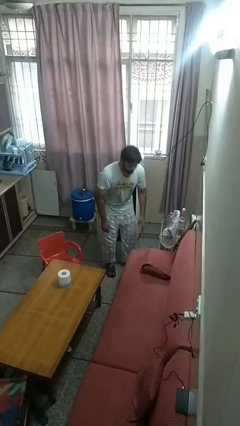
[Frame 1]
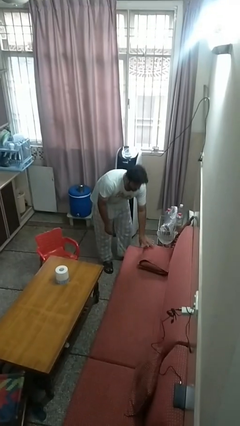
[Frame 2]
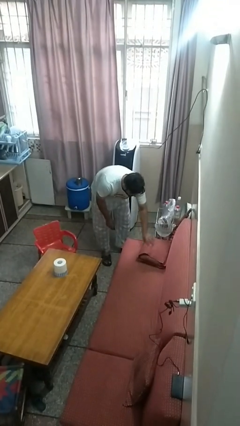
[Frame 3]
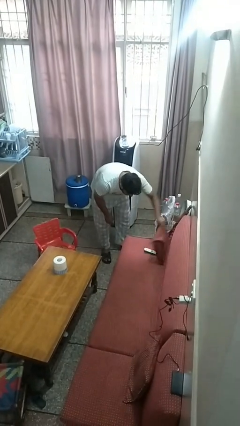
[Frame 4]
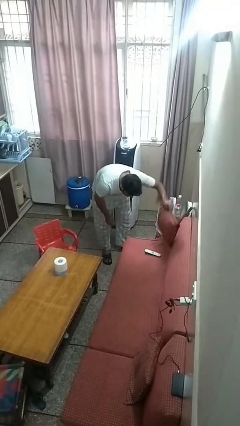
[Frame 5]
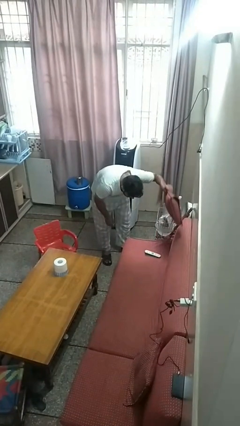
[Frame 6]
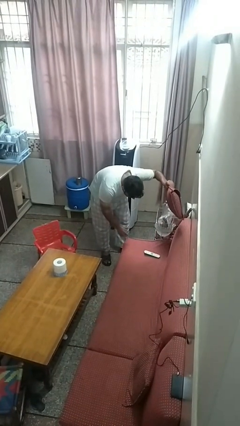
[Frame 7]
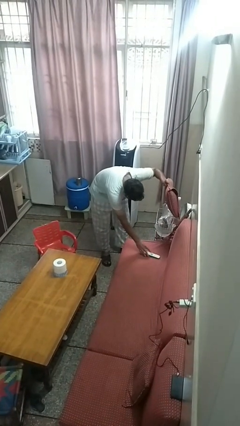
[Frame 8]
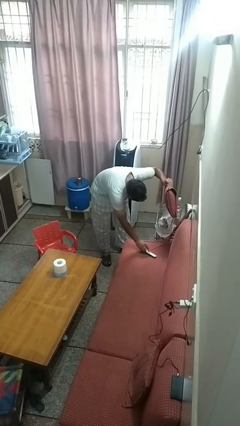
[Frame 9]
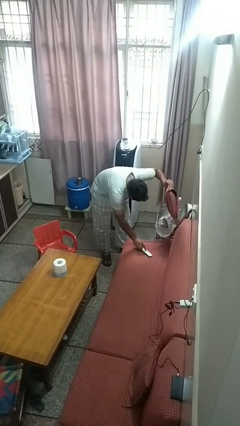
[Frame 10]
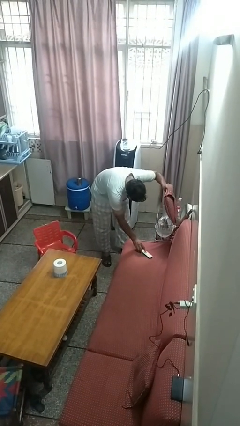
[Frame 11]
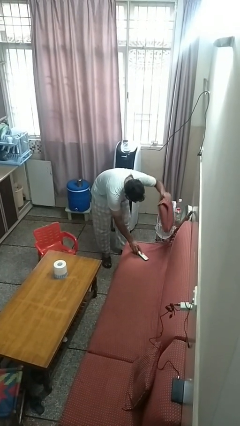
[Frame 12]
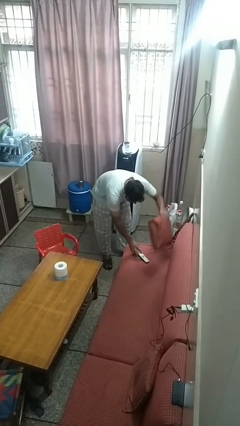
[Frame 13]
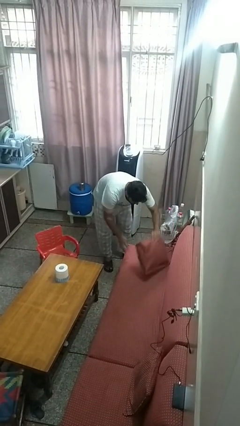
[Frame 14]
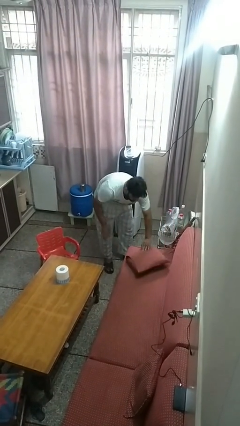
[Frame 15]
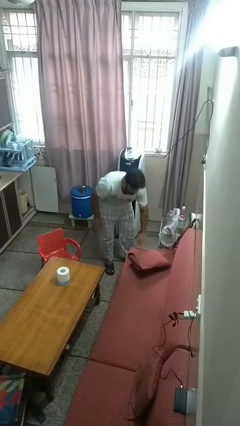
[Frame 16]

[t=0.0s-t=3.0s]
person searches in couch

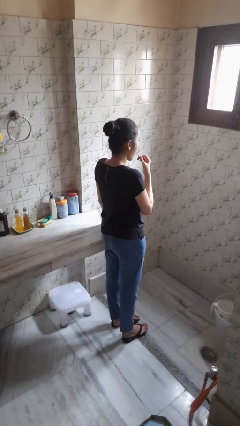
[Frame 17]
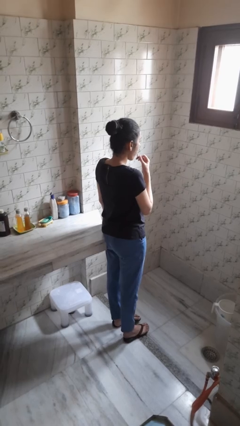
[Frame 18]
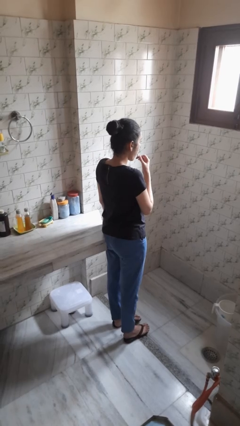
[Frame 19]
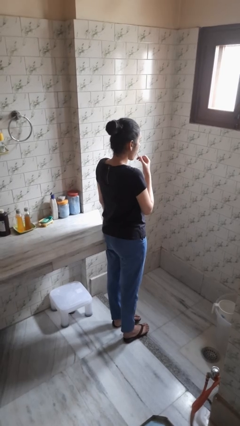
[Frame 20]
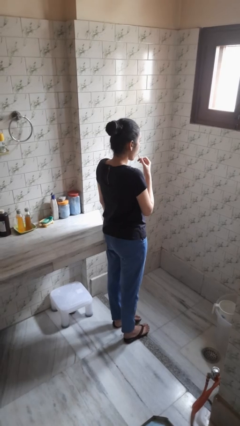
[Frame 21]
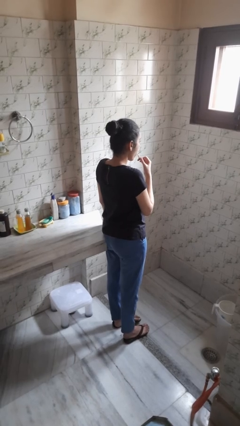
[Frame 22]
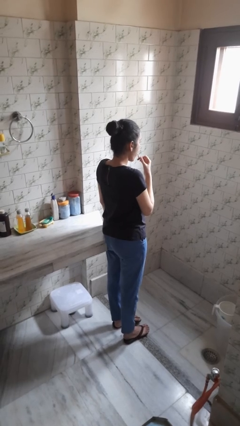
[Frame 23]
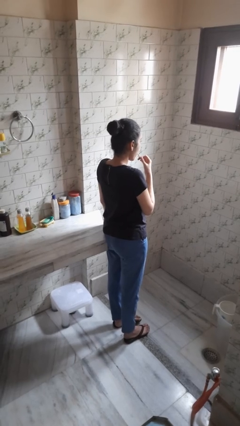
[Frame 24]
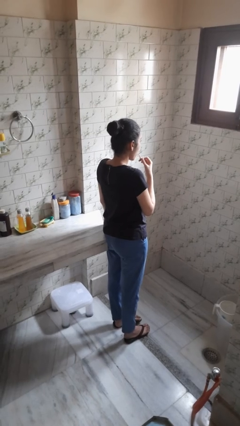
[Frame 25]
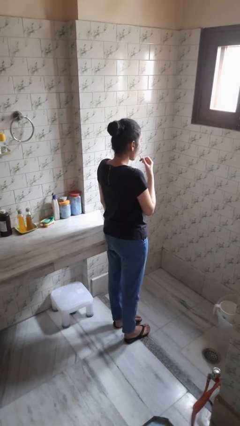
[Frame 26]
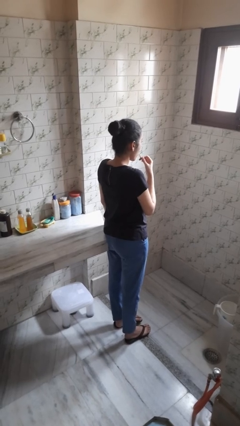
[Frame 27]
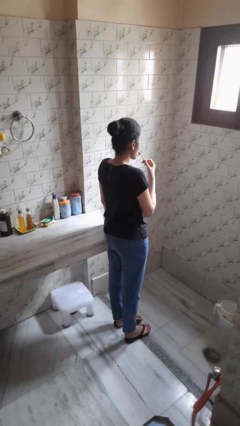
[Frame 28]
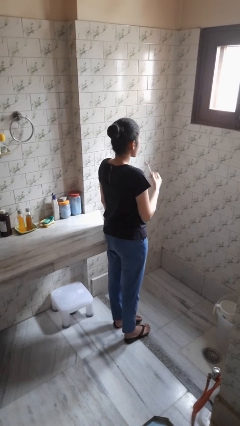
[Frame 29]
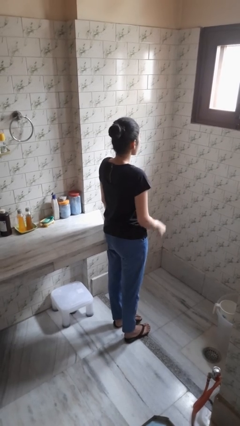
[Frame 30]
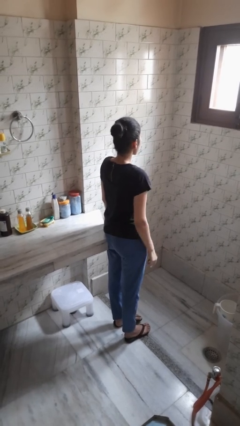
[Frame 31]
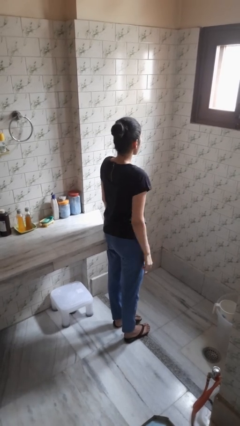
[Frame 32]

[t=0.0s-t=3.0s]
person brushes teeth

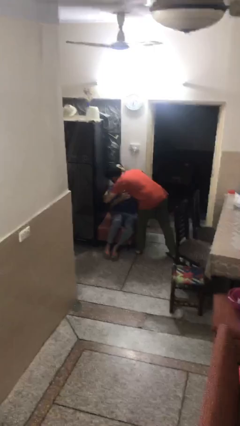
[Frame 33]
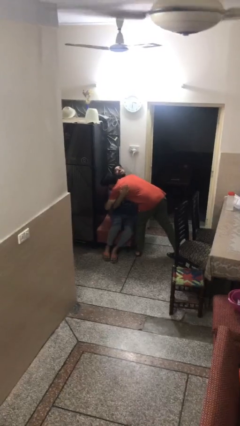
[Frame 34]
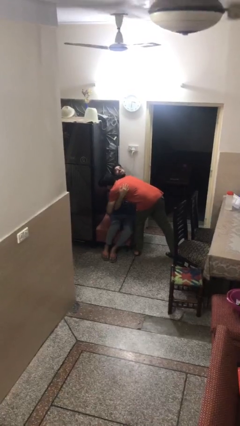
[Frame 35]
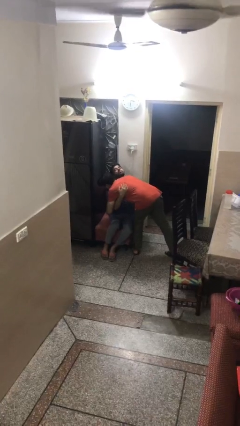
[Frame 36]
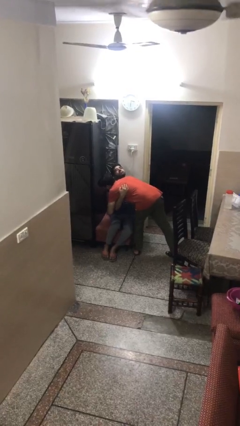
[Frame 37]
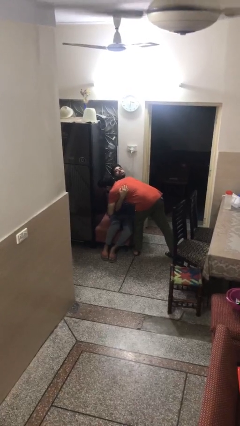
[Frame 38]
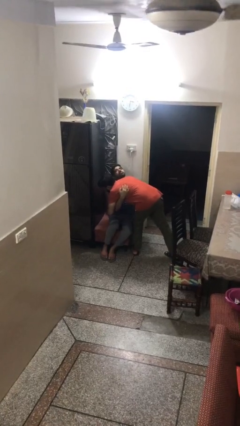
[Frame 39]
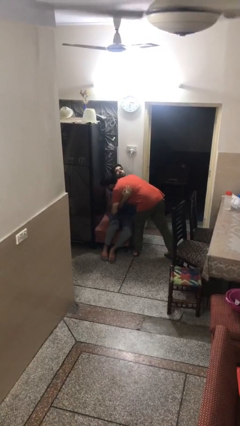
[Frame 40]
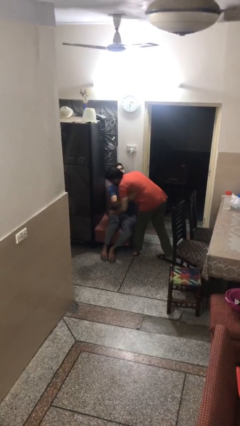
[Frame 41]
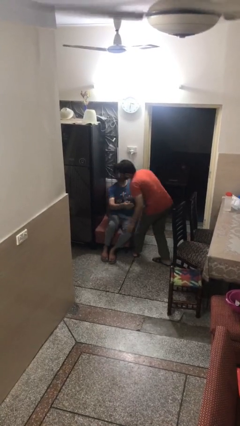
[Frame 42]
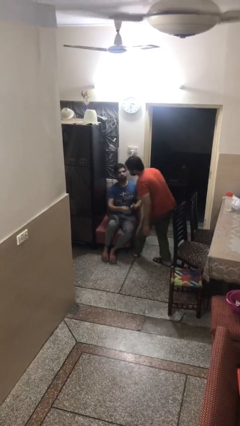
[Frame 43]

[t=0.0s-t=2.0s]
person embraces person

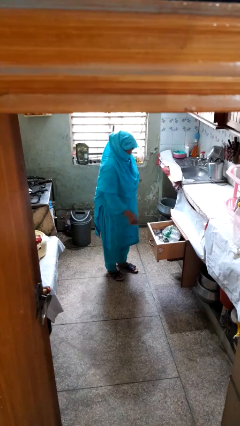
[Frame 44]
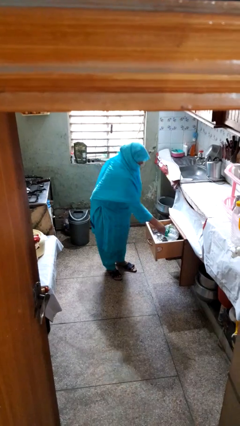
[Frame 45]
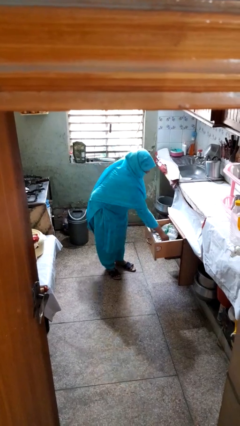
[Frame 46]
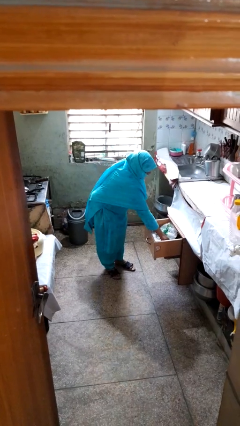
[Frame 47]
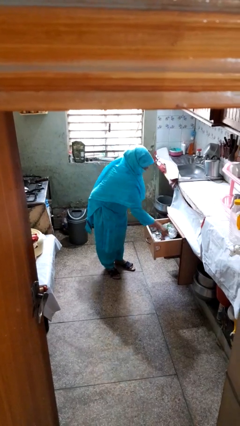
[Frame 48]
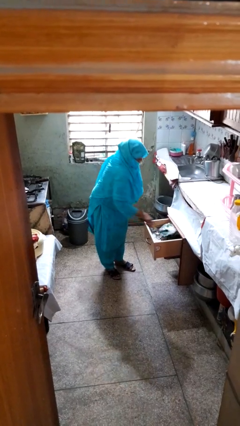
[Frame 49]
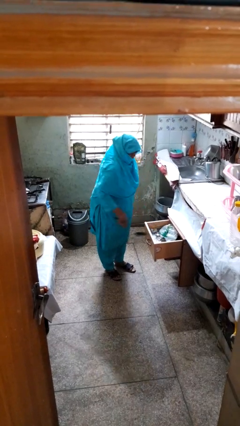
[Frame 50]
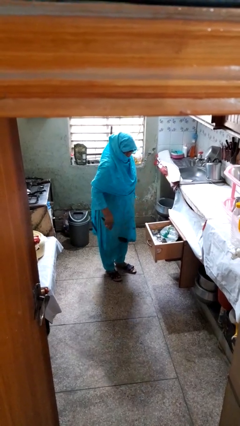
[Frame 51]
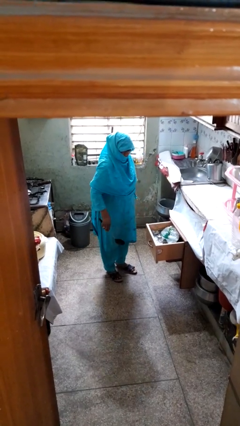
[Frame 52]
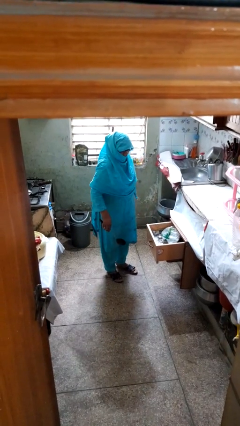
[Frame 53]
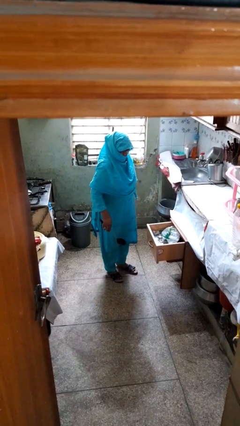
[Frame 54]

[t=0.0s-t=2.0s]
person takes object from kitchen drawer

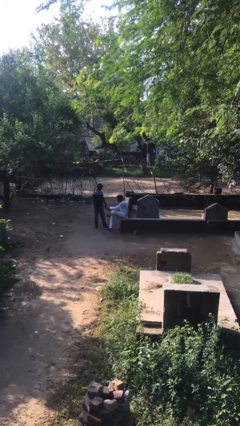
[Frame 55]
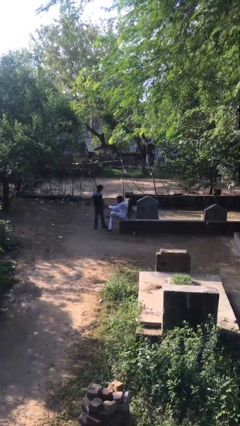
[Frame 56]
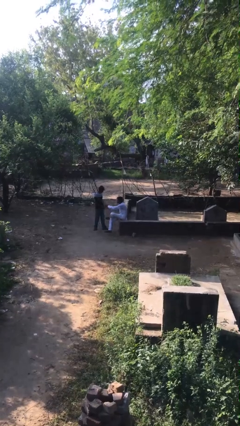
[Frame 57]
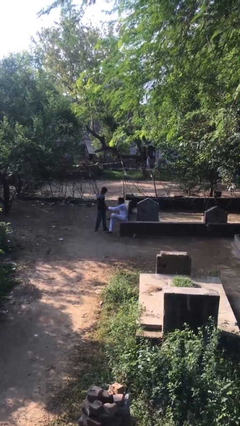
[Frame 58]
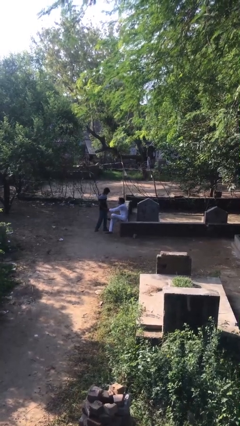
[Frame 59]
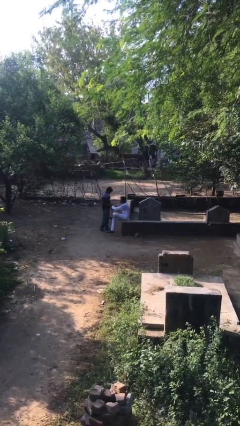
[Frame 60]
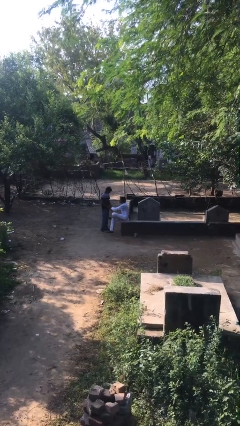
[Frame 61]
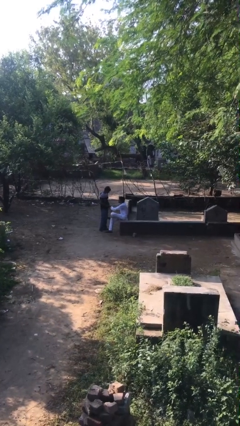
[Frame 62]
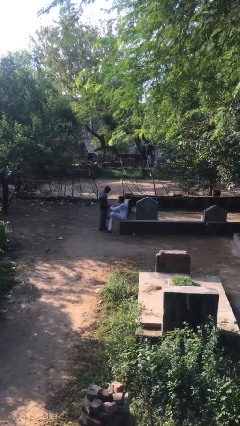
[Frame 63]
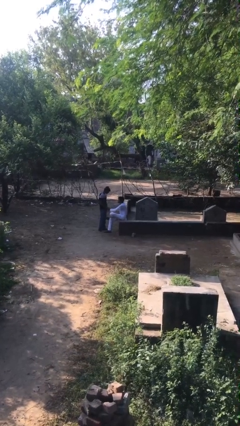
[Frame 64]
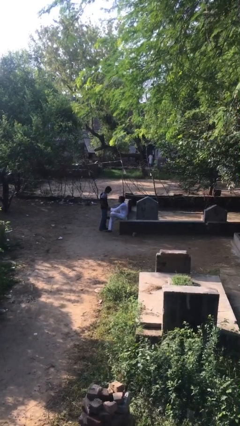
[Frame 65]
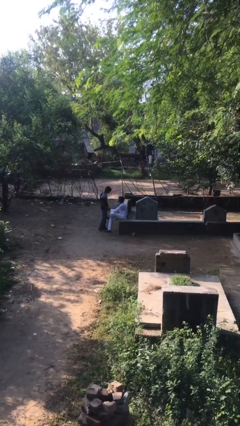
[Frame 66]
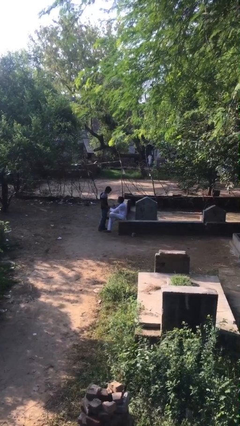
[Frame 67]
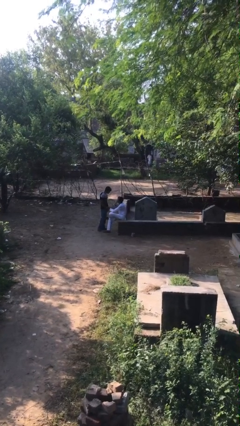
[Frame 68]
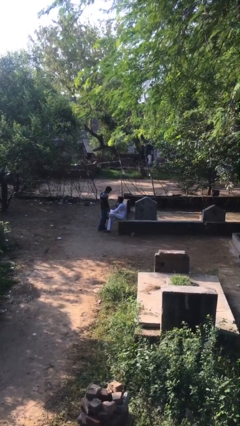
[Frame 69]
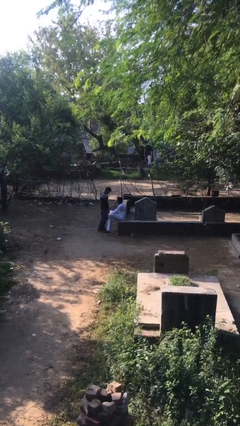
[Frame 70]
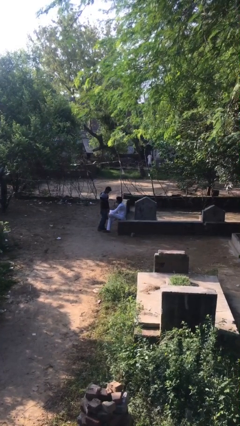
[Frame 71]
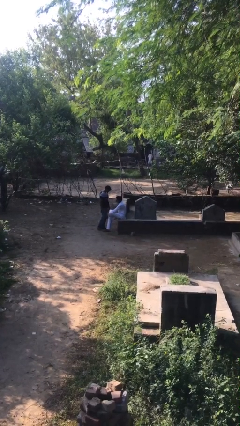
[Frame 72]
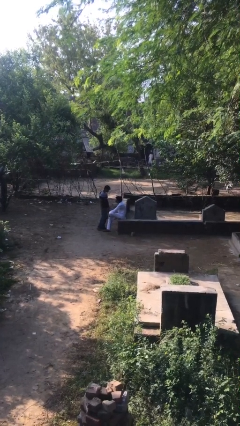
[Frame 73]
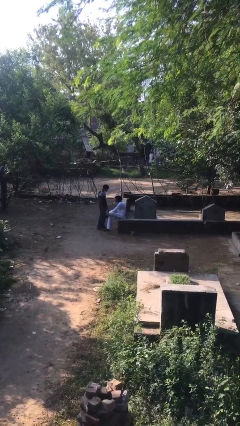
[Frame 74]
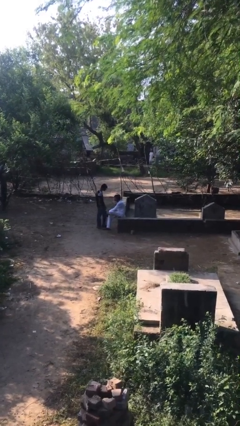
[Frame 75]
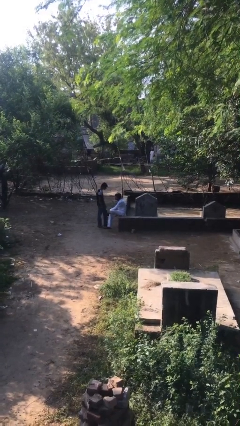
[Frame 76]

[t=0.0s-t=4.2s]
person shakes hand

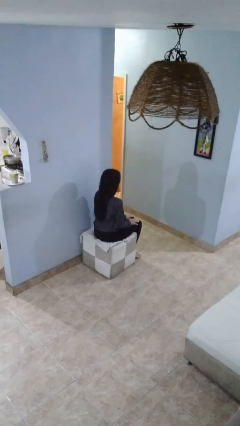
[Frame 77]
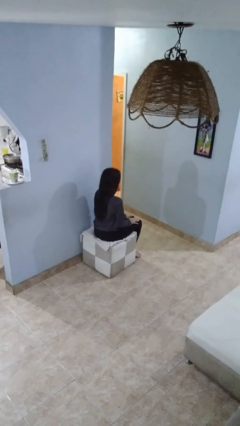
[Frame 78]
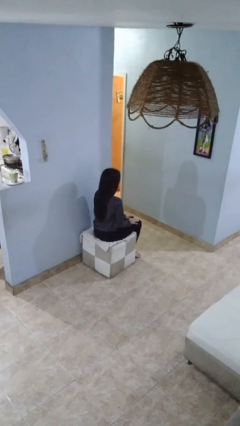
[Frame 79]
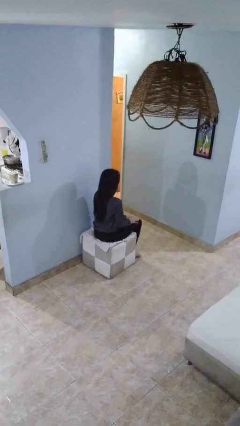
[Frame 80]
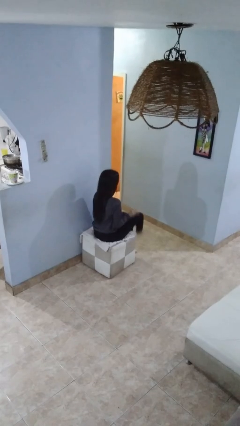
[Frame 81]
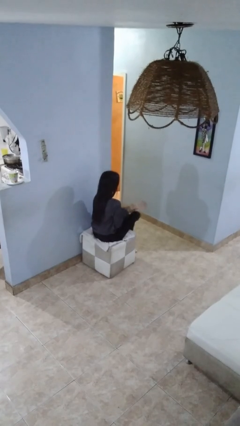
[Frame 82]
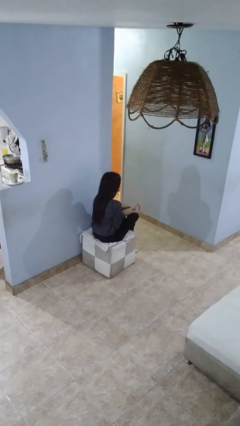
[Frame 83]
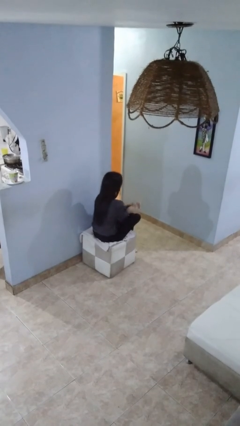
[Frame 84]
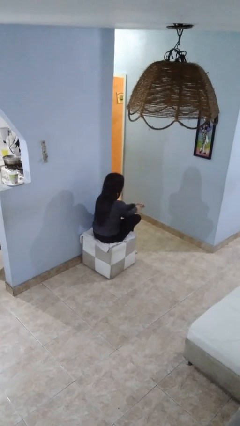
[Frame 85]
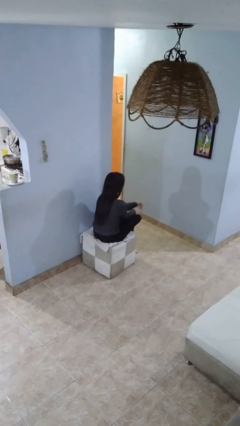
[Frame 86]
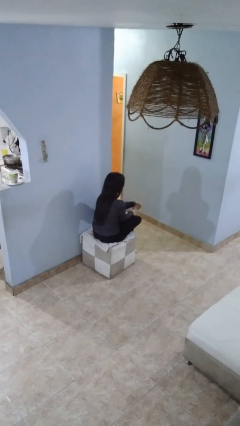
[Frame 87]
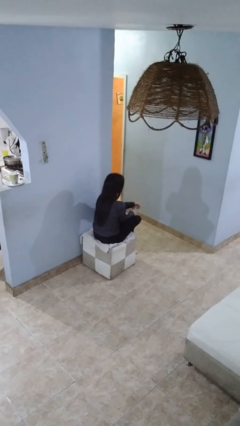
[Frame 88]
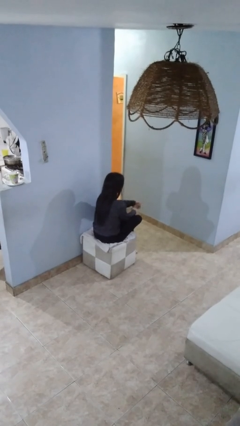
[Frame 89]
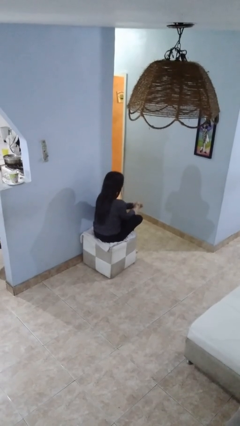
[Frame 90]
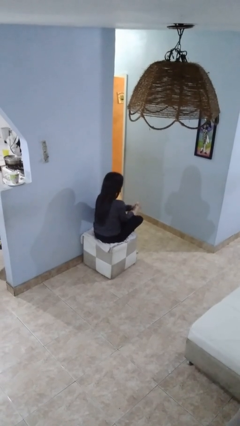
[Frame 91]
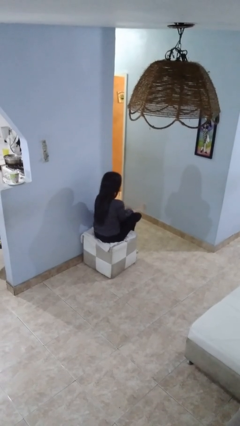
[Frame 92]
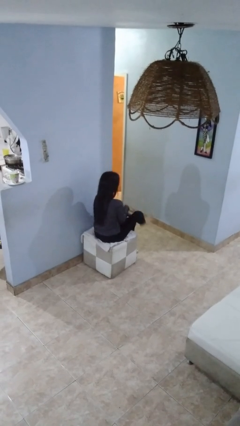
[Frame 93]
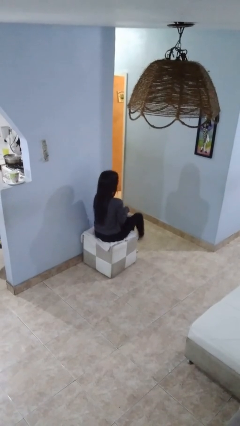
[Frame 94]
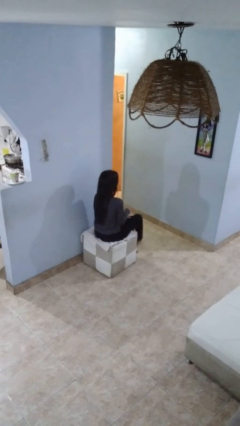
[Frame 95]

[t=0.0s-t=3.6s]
person rubs foot
